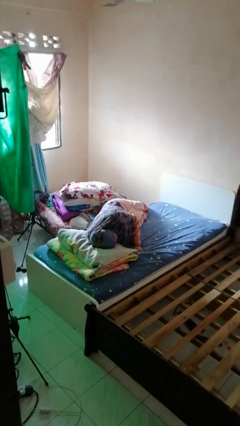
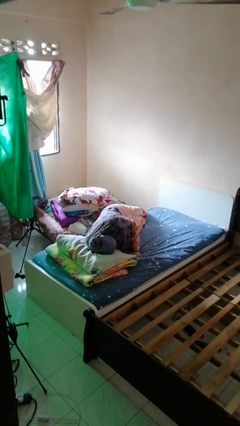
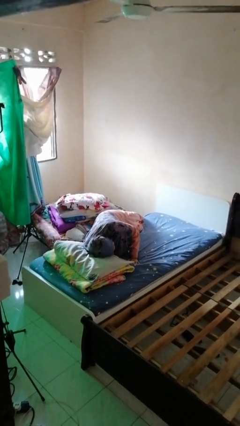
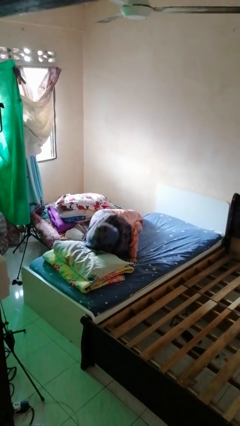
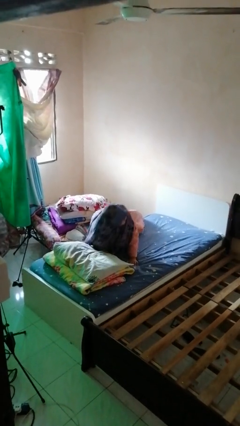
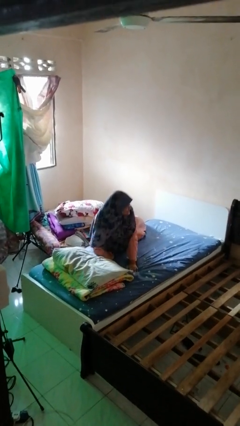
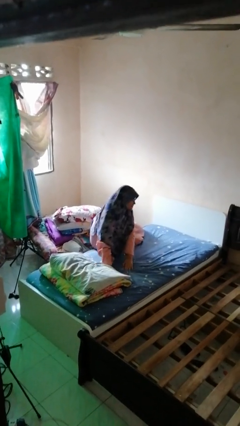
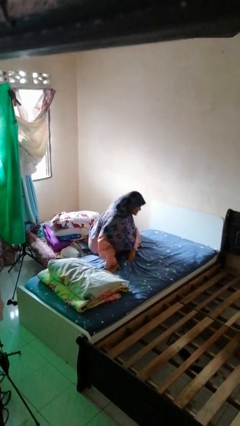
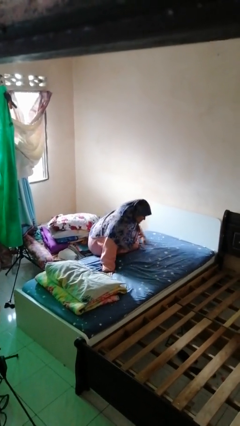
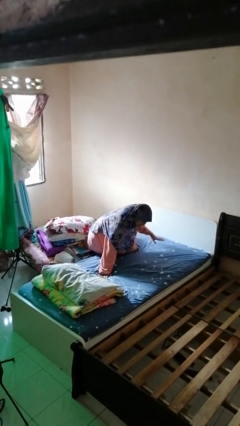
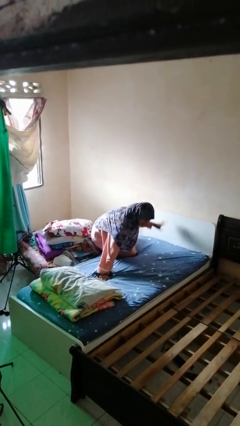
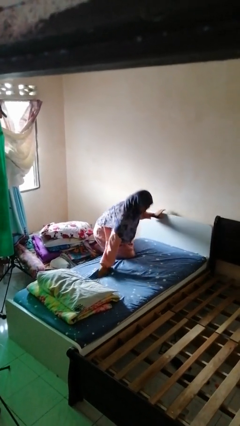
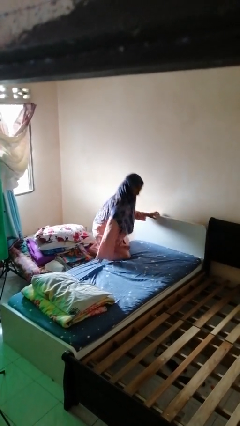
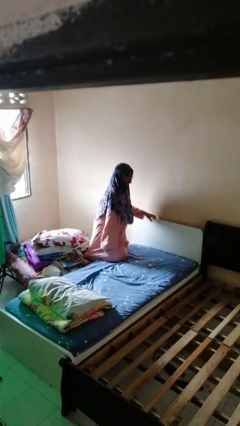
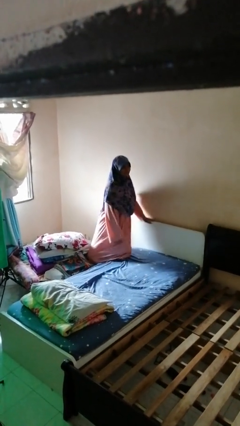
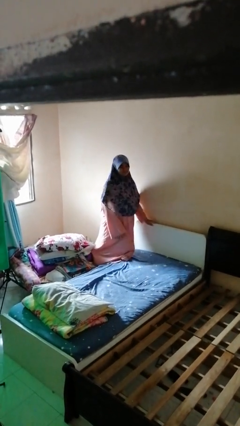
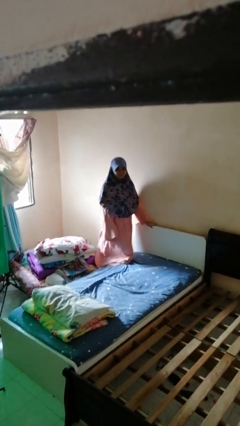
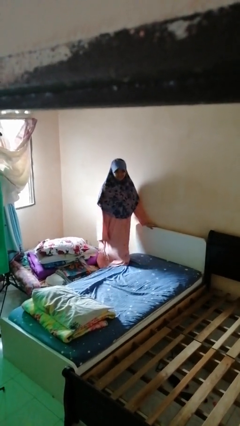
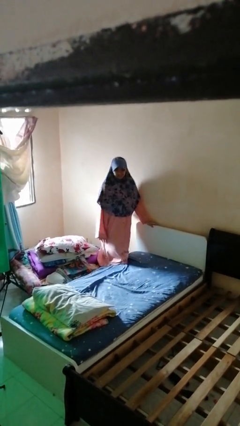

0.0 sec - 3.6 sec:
person stands up

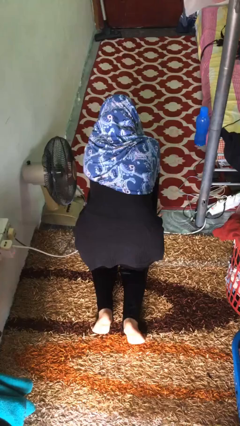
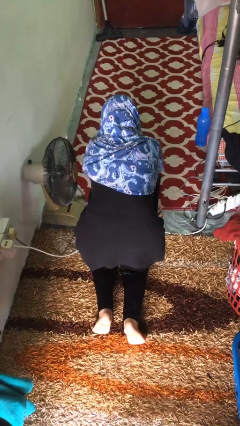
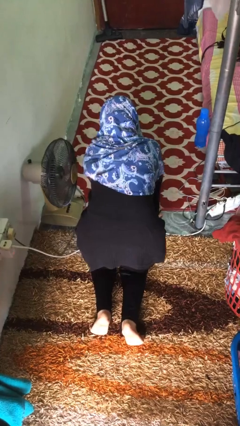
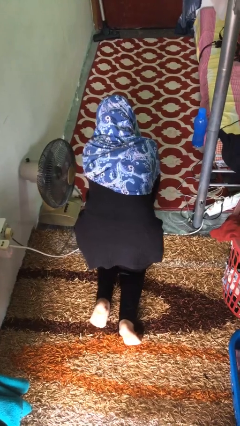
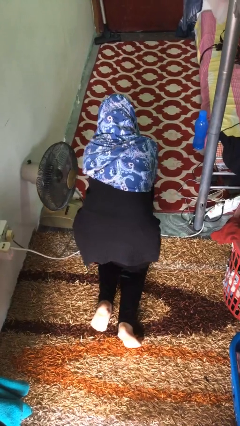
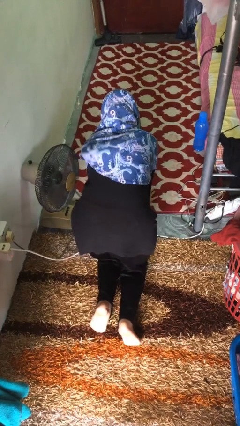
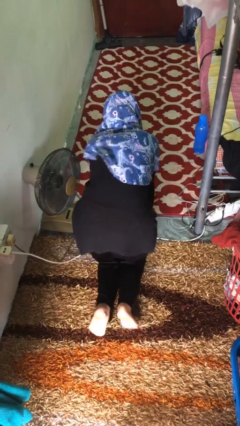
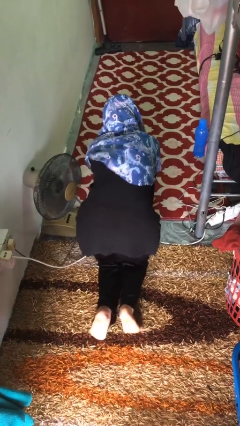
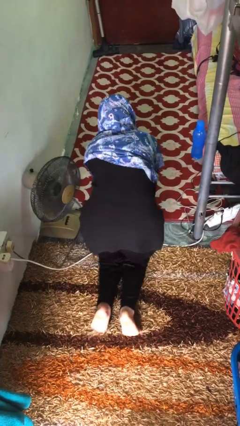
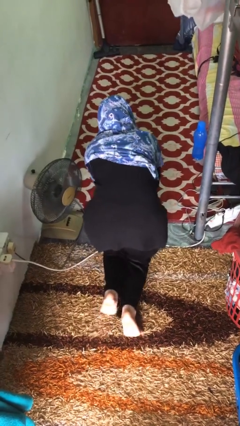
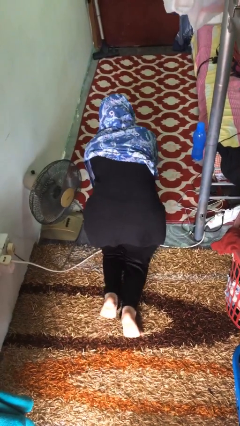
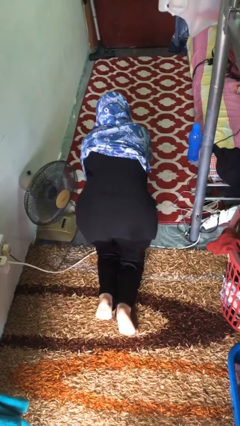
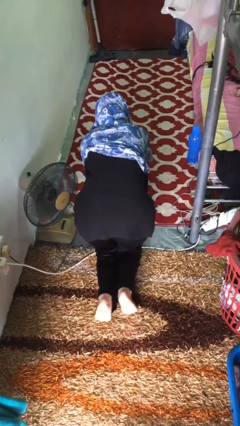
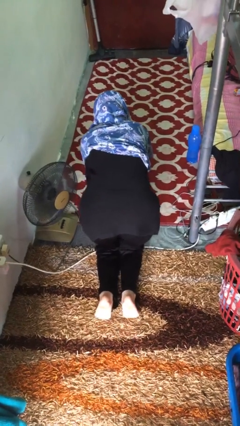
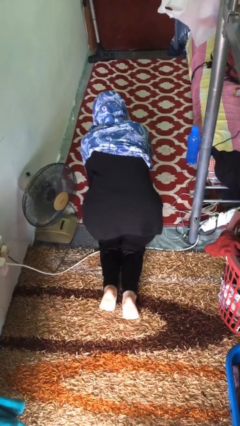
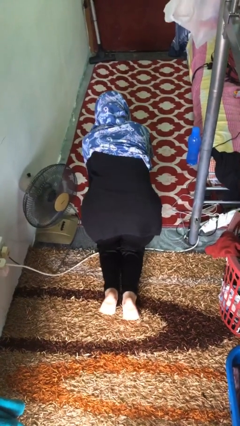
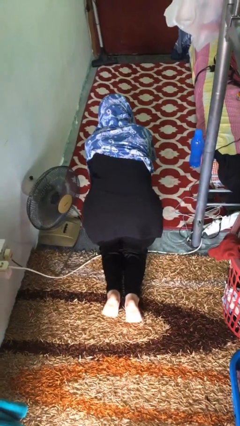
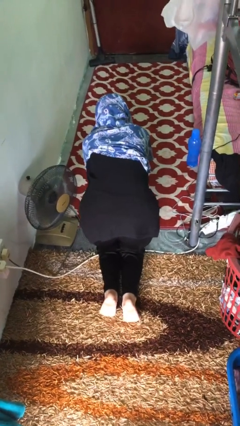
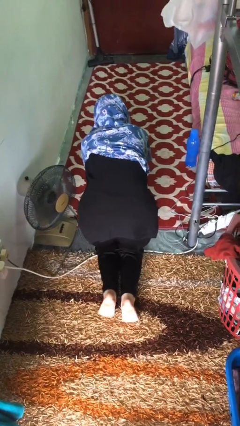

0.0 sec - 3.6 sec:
person crawls

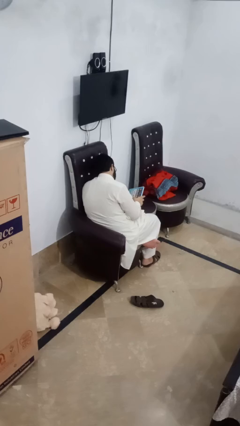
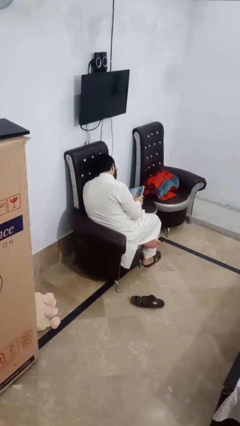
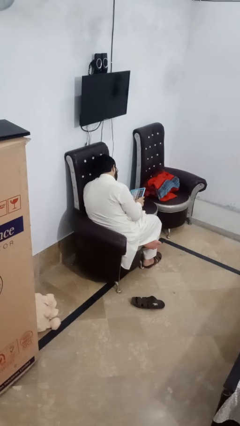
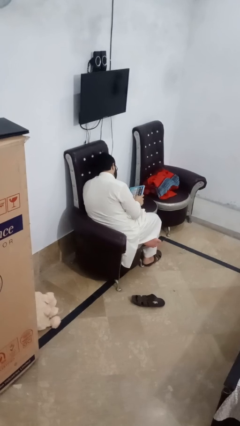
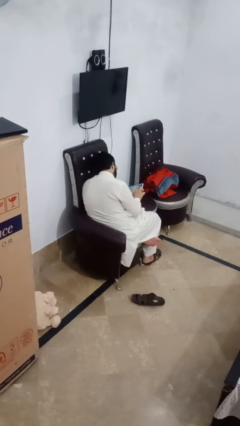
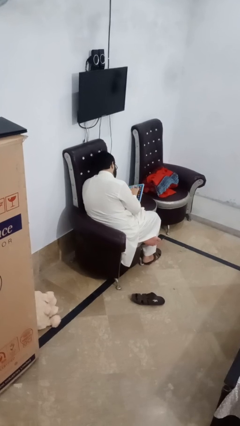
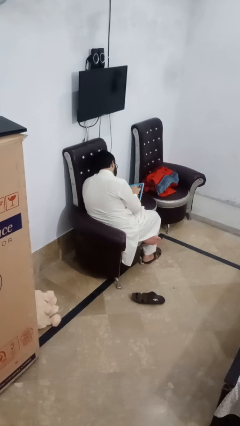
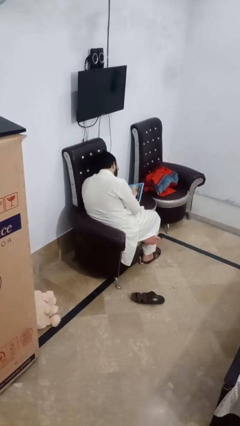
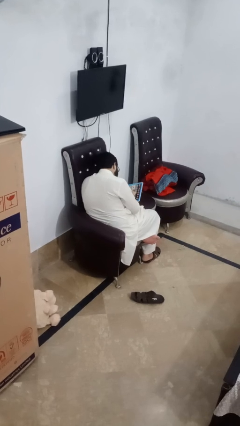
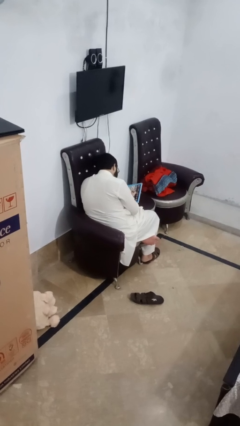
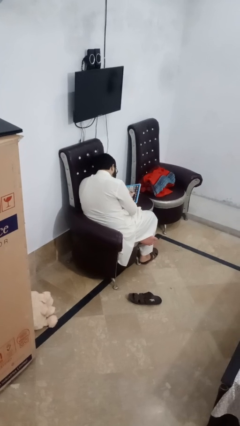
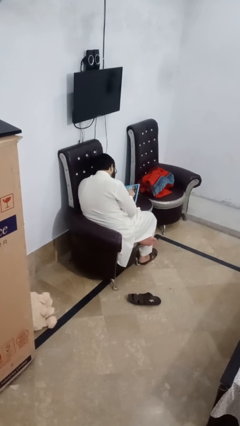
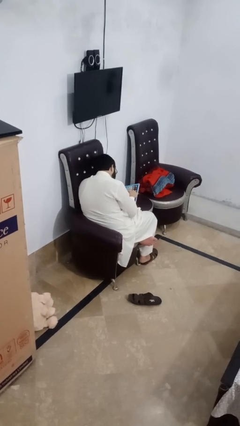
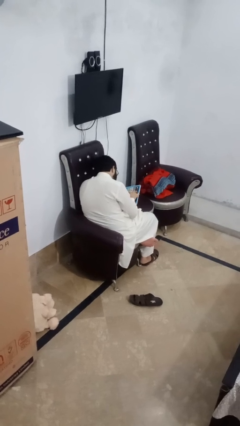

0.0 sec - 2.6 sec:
person interacts with tablet

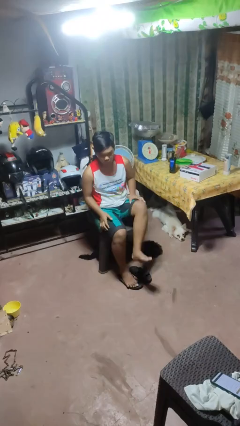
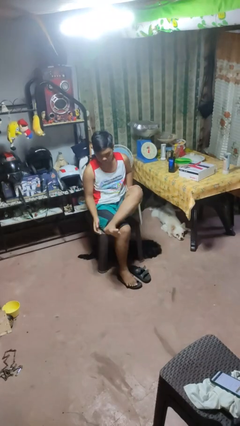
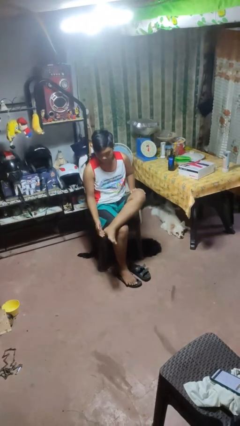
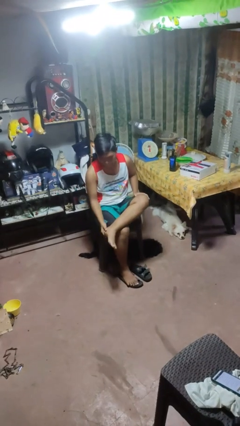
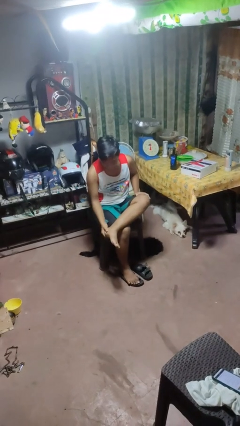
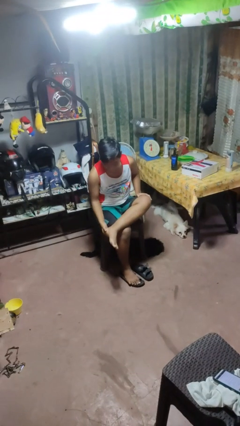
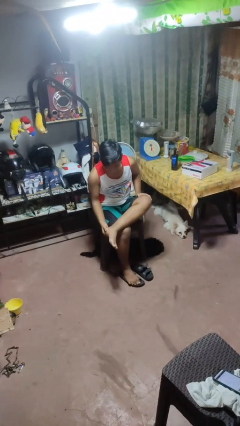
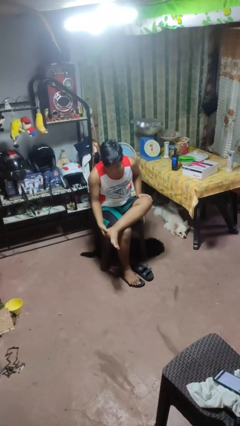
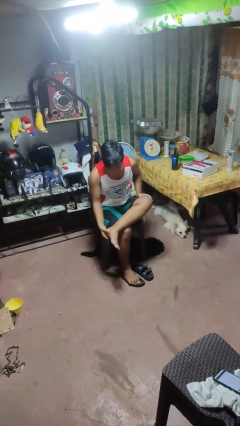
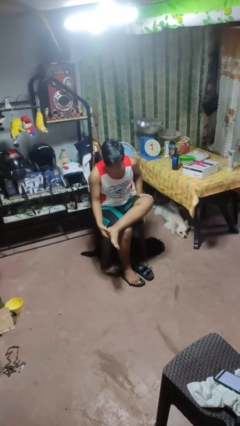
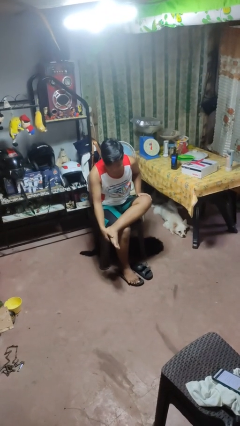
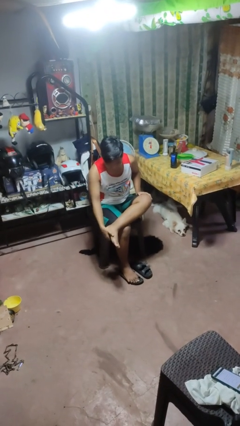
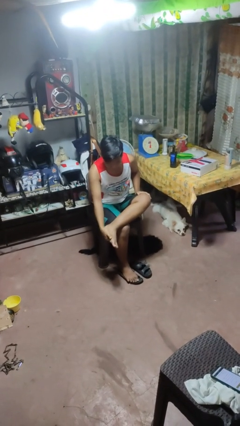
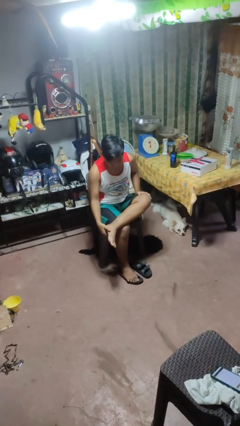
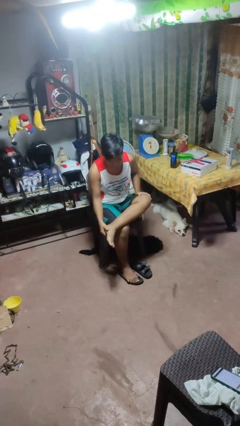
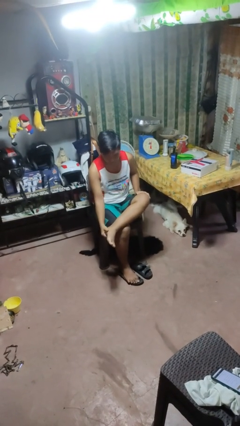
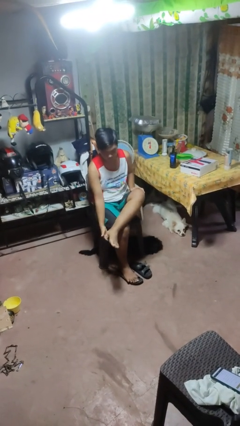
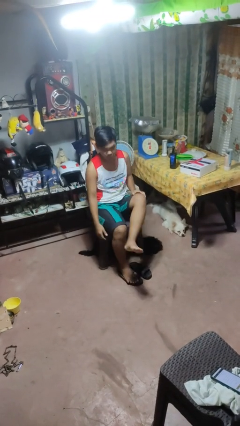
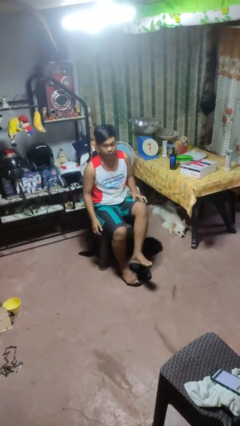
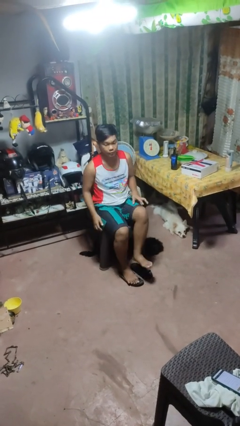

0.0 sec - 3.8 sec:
person rubs foot

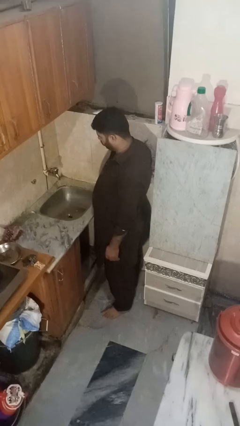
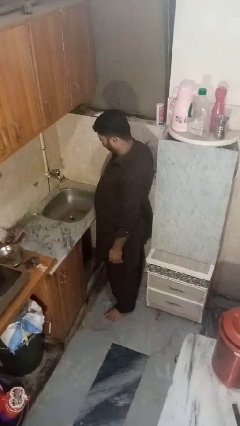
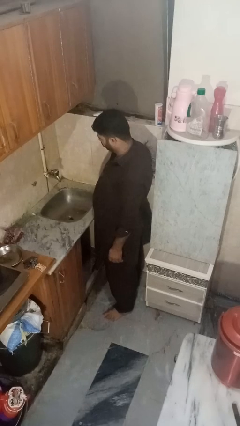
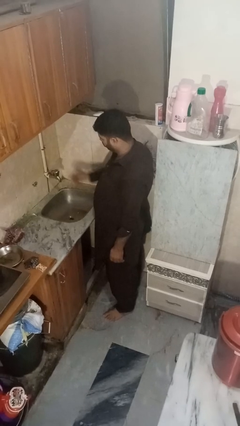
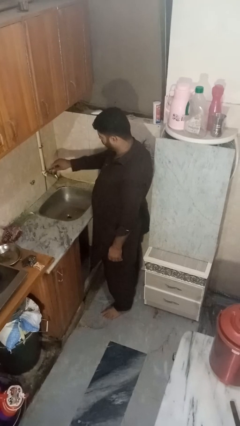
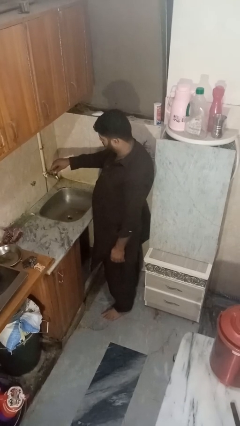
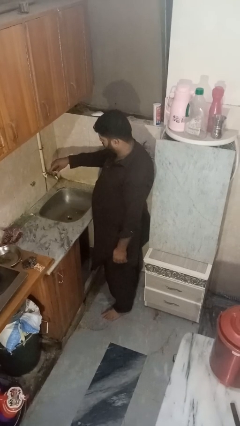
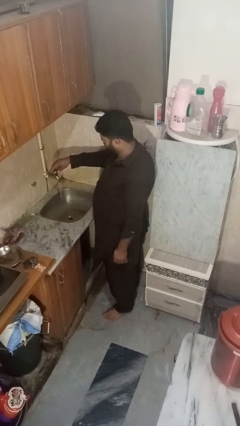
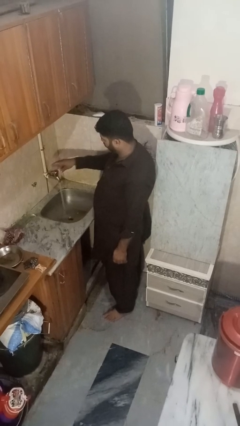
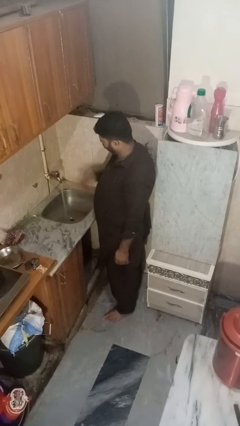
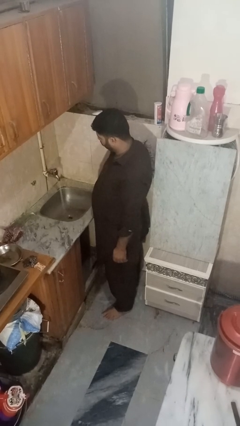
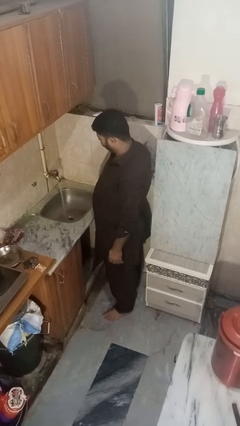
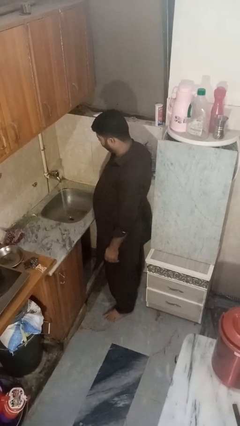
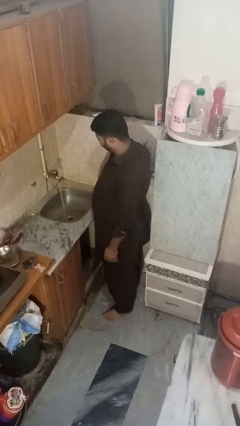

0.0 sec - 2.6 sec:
person turns on faucet

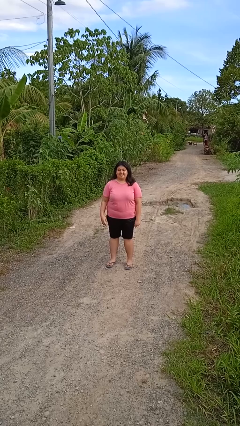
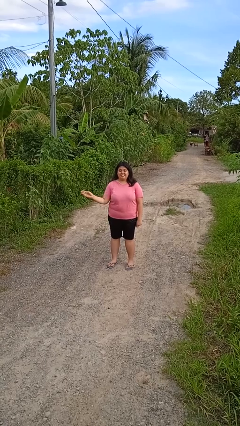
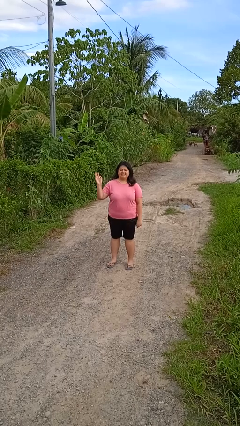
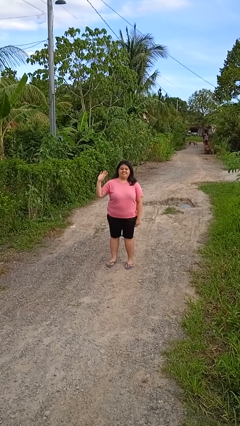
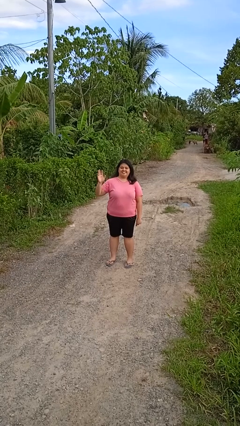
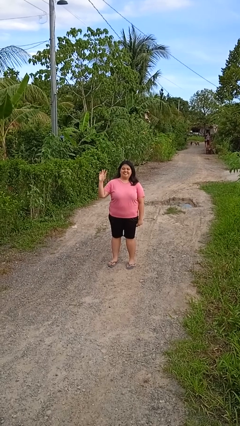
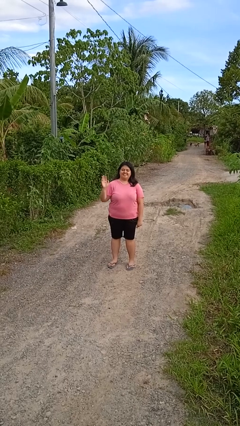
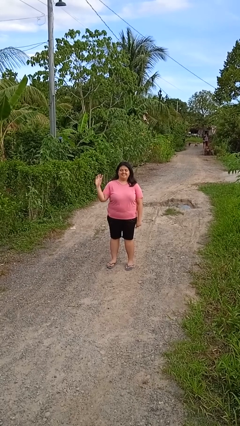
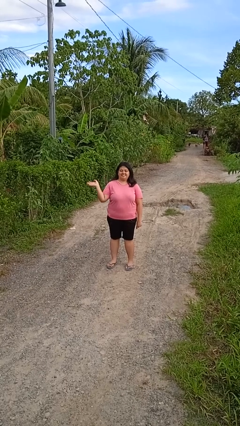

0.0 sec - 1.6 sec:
person waves at person
